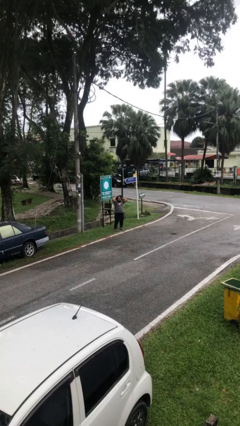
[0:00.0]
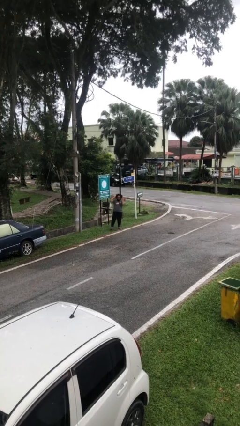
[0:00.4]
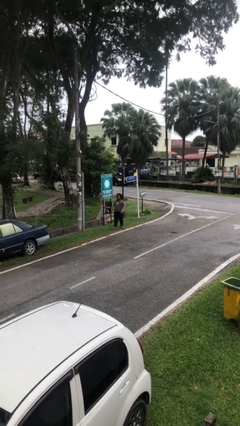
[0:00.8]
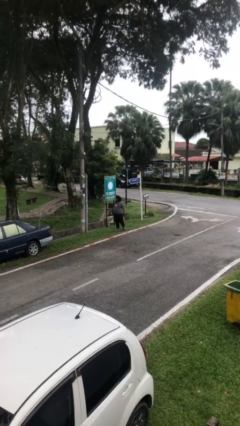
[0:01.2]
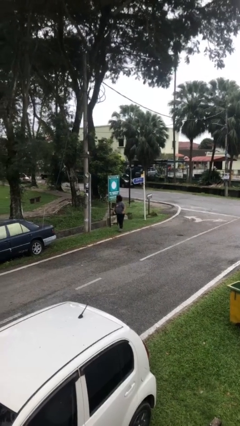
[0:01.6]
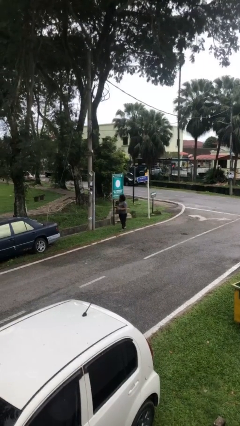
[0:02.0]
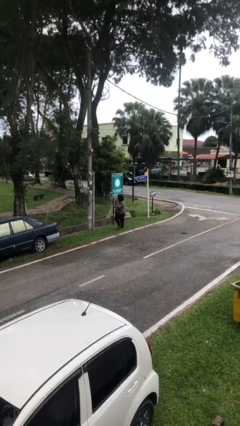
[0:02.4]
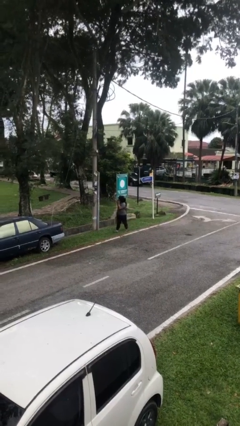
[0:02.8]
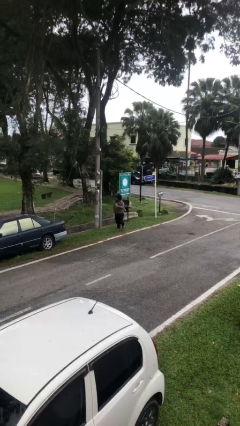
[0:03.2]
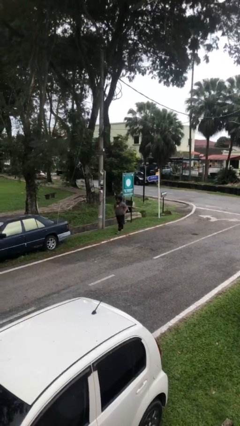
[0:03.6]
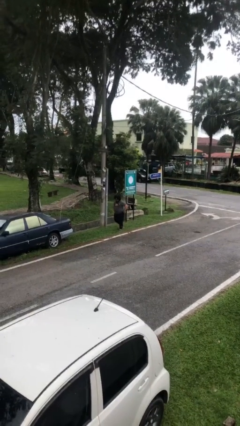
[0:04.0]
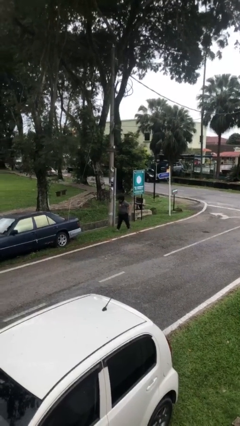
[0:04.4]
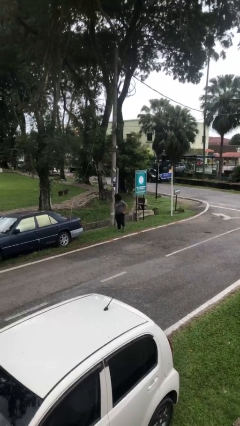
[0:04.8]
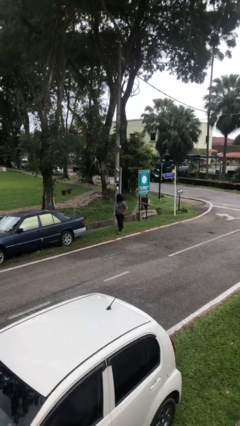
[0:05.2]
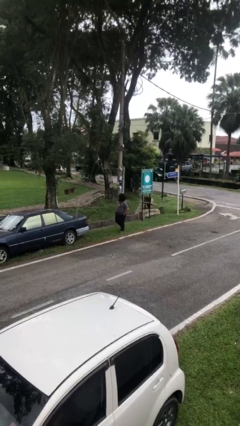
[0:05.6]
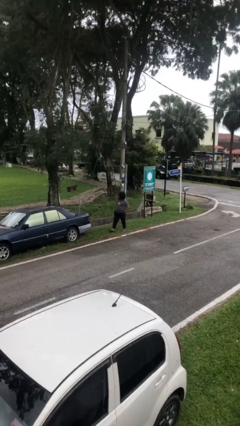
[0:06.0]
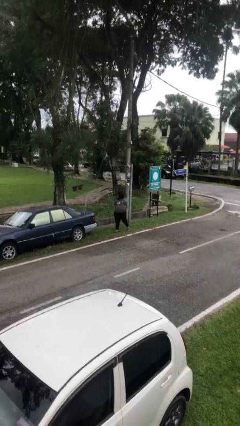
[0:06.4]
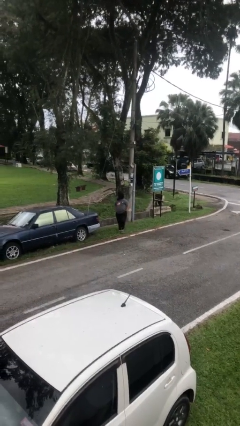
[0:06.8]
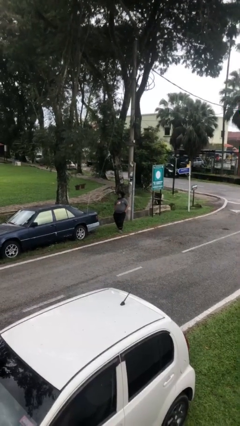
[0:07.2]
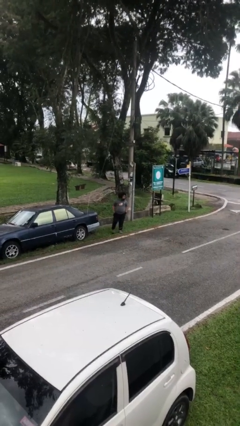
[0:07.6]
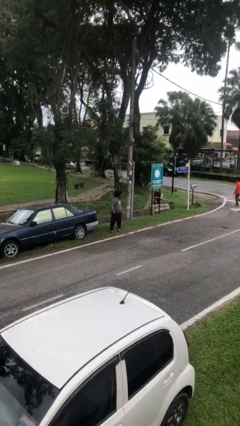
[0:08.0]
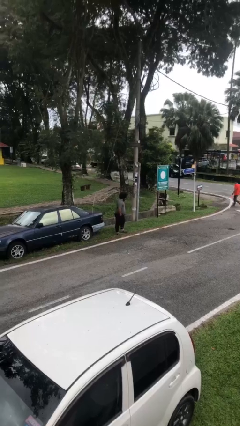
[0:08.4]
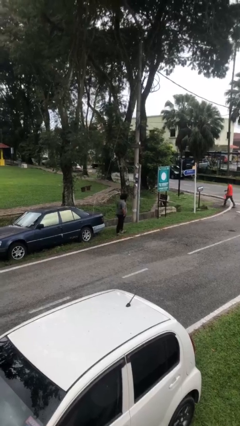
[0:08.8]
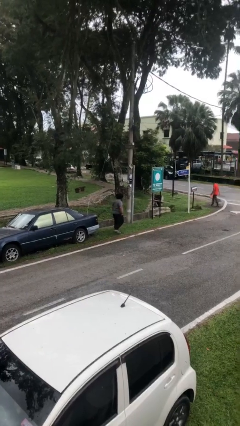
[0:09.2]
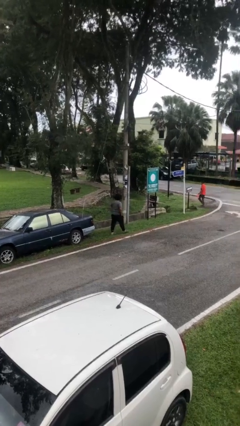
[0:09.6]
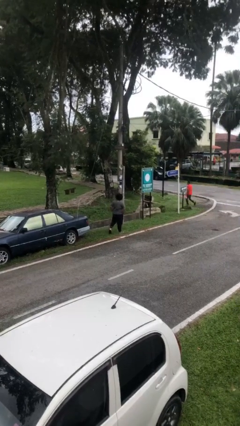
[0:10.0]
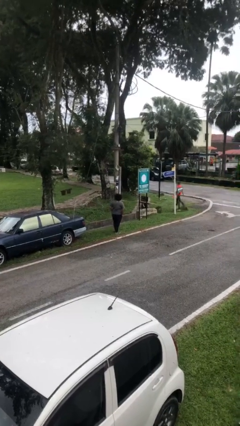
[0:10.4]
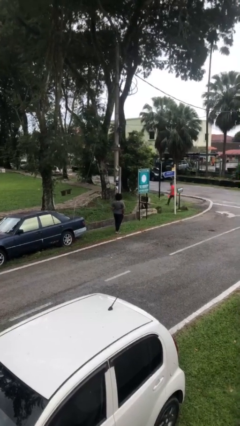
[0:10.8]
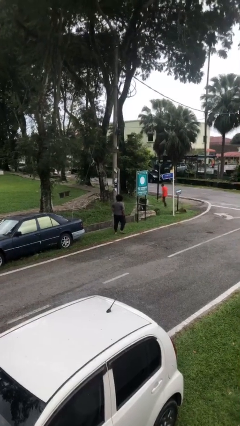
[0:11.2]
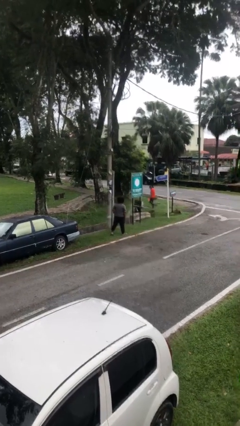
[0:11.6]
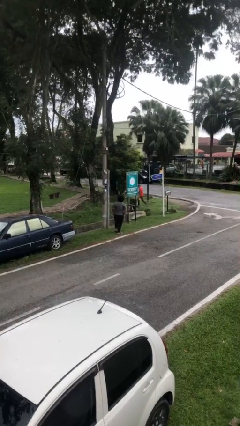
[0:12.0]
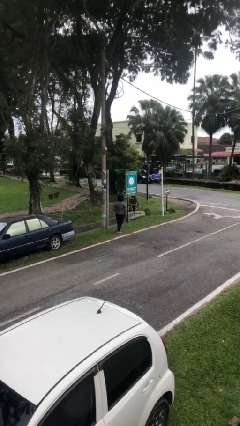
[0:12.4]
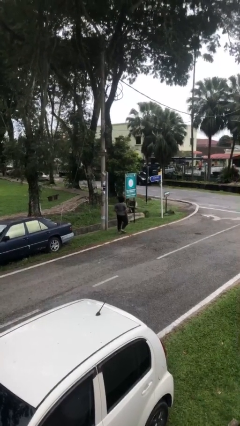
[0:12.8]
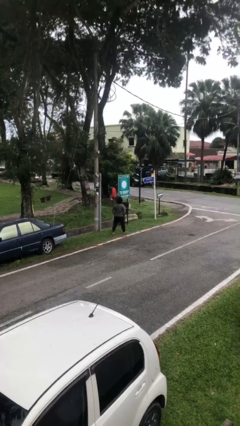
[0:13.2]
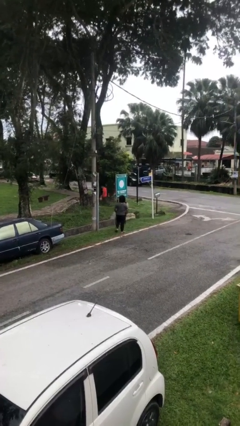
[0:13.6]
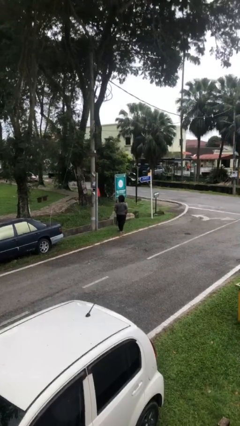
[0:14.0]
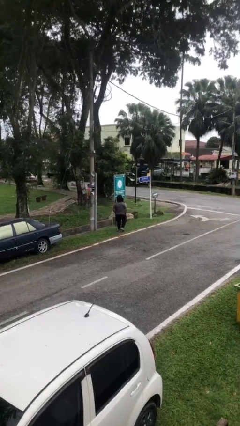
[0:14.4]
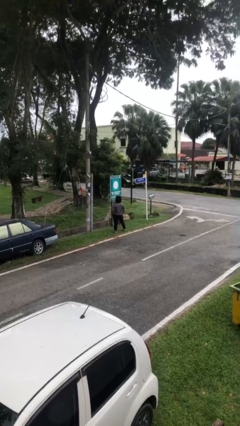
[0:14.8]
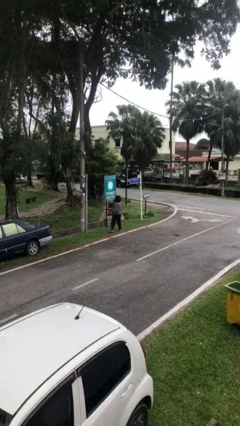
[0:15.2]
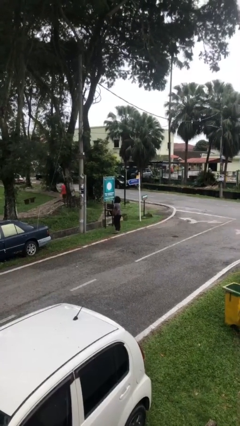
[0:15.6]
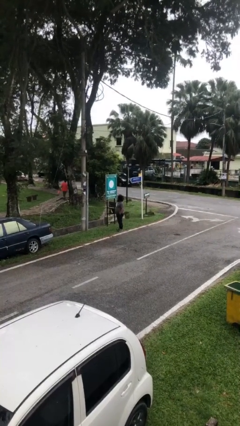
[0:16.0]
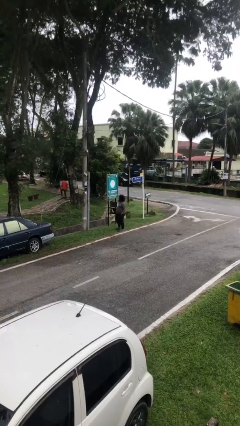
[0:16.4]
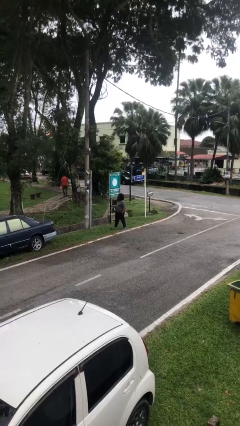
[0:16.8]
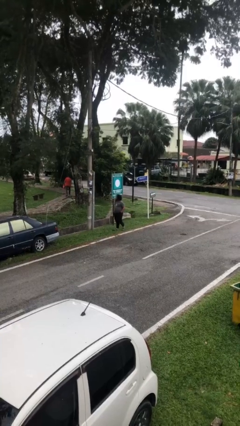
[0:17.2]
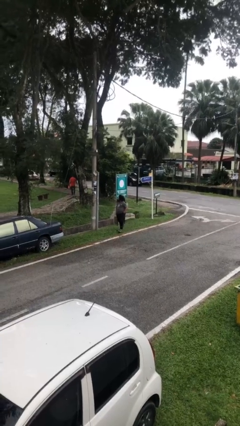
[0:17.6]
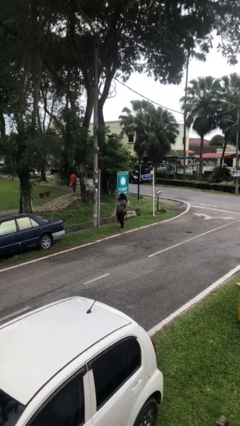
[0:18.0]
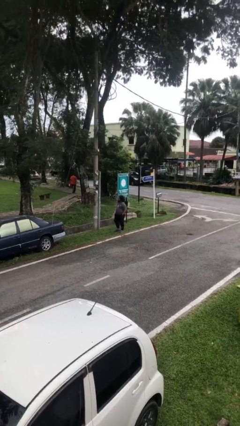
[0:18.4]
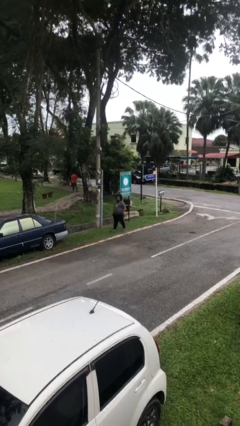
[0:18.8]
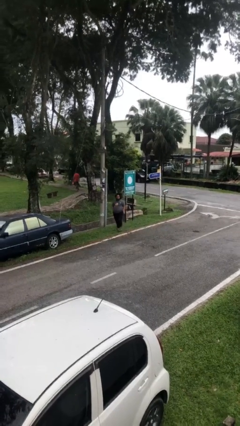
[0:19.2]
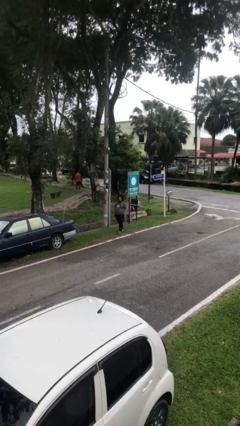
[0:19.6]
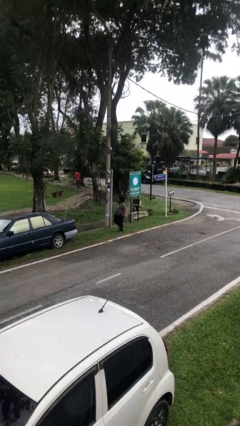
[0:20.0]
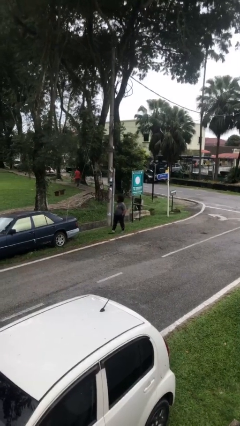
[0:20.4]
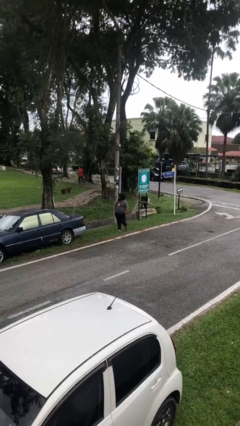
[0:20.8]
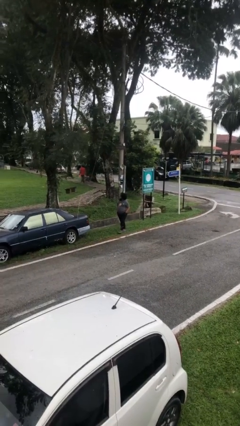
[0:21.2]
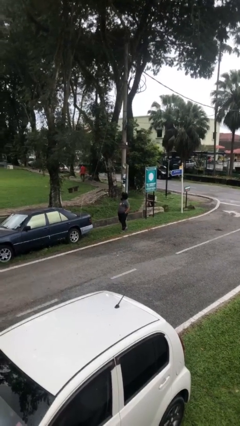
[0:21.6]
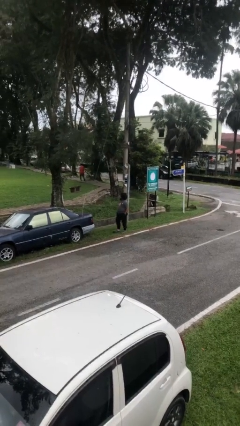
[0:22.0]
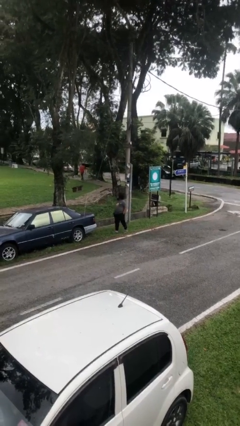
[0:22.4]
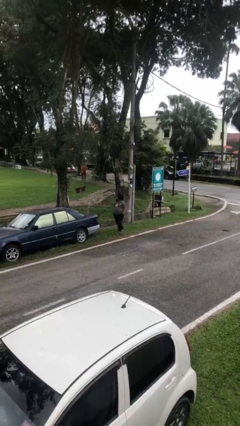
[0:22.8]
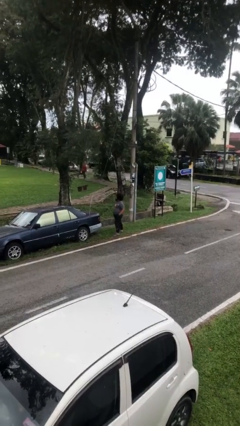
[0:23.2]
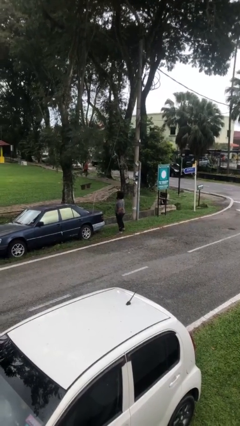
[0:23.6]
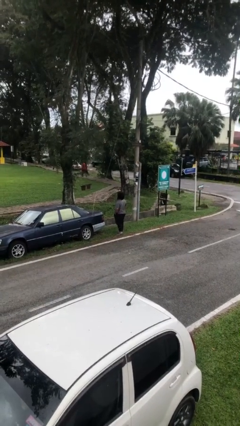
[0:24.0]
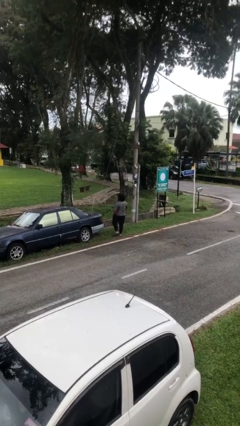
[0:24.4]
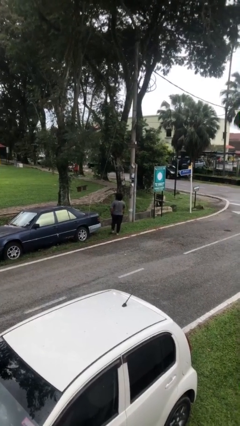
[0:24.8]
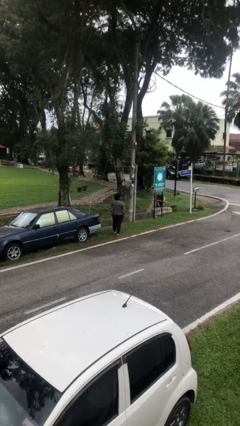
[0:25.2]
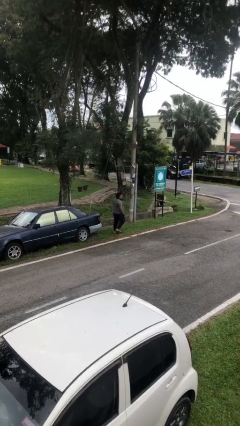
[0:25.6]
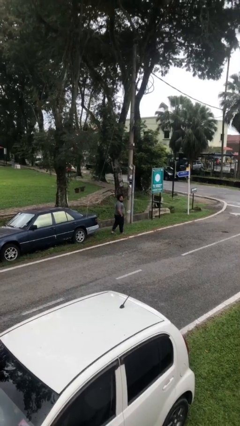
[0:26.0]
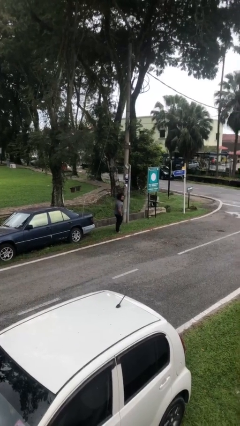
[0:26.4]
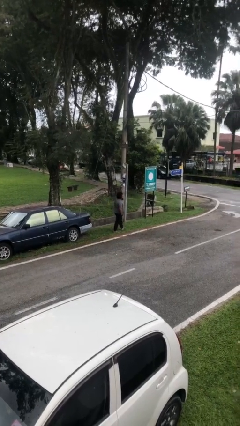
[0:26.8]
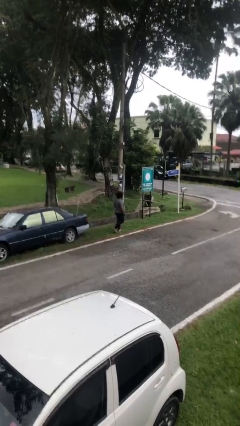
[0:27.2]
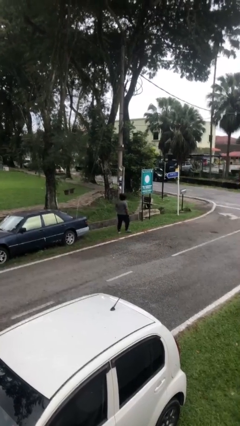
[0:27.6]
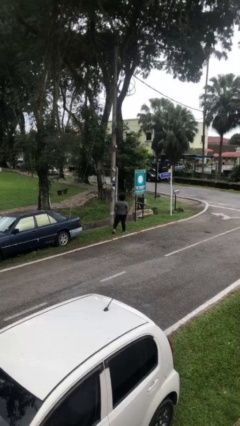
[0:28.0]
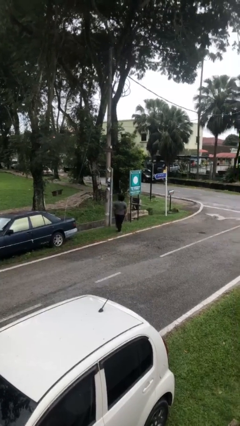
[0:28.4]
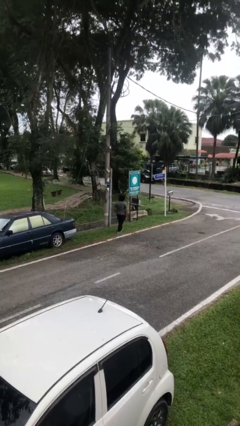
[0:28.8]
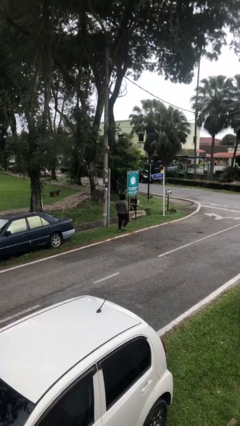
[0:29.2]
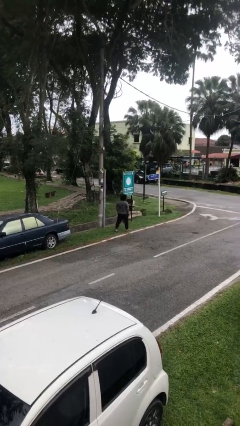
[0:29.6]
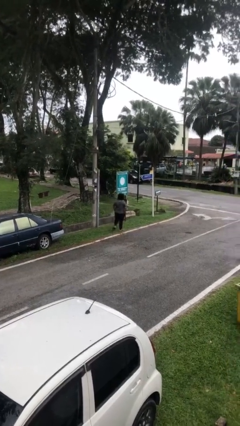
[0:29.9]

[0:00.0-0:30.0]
person walks

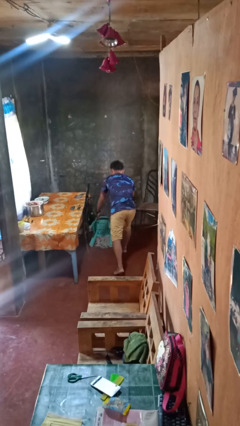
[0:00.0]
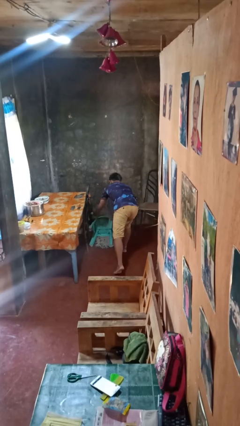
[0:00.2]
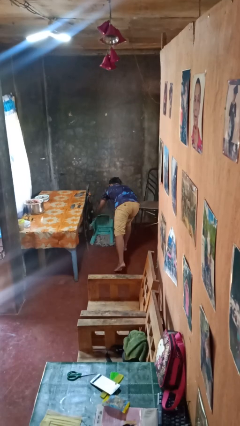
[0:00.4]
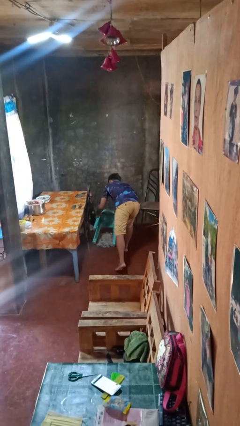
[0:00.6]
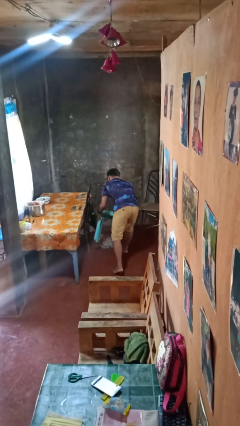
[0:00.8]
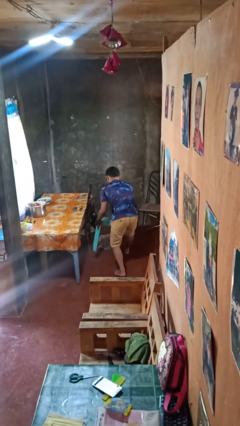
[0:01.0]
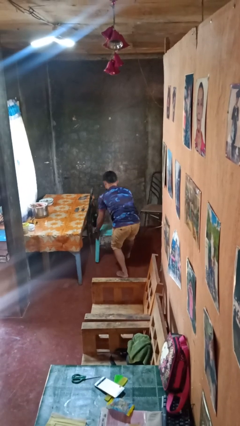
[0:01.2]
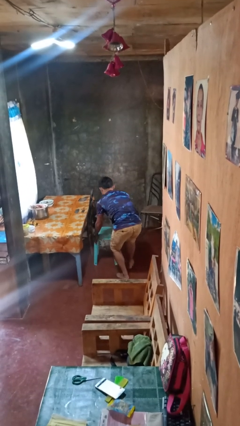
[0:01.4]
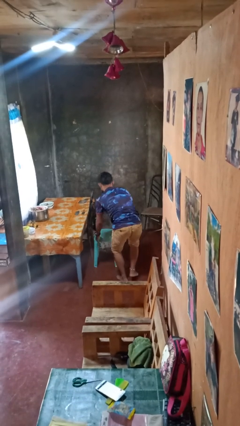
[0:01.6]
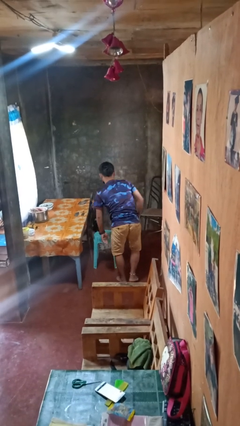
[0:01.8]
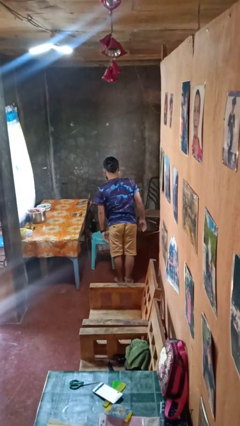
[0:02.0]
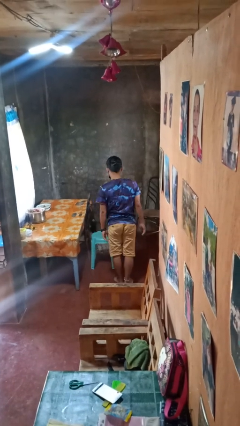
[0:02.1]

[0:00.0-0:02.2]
person sets upright furniture

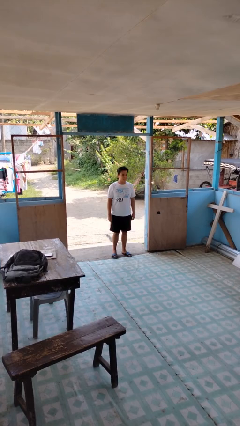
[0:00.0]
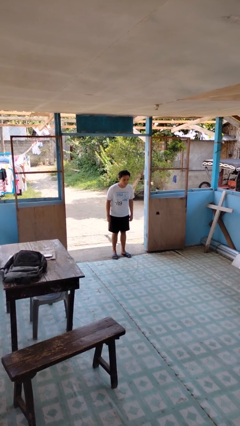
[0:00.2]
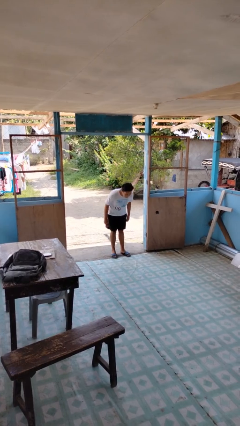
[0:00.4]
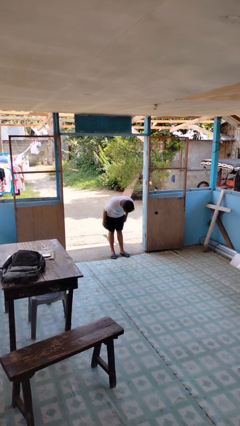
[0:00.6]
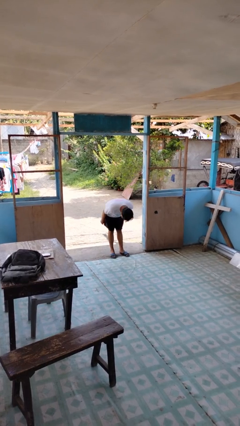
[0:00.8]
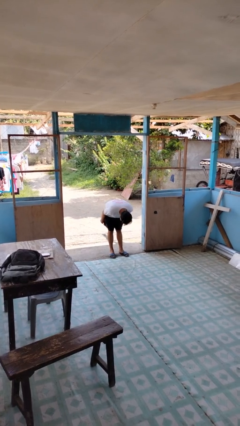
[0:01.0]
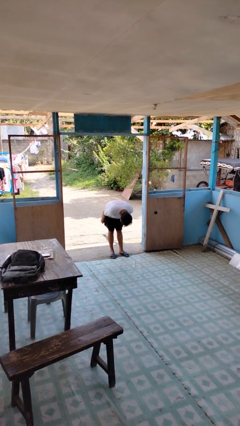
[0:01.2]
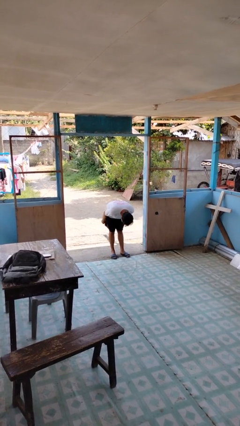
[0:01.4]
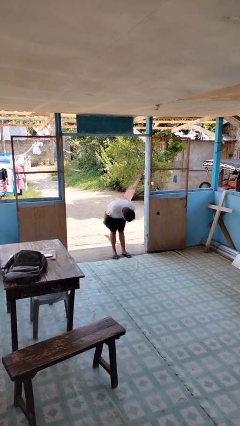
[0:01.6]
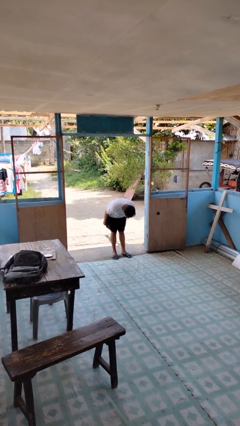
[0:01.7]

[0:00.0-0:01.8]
person bows
